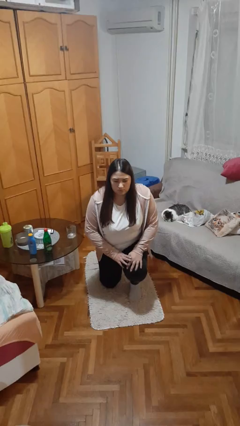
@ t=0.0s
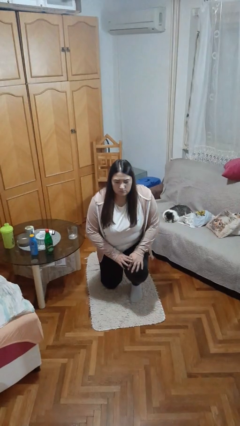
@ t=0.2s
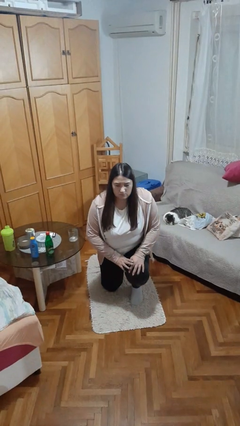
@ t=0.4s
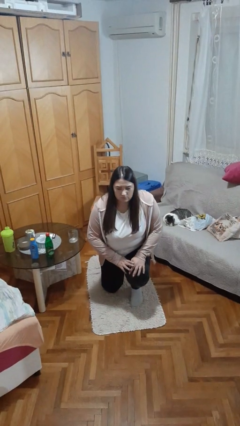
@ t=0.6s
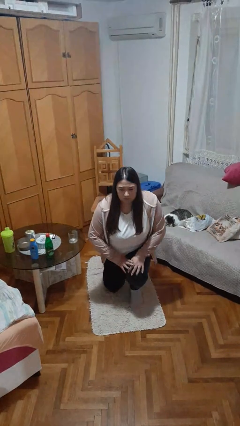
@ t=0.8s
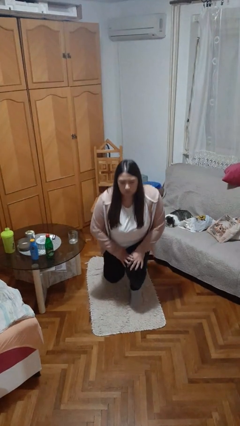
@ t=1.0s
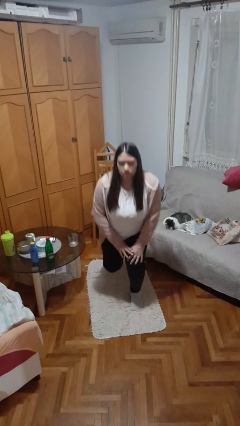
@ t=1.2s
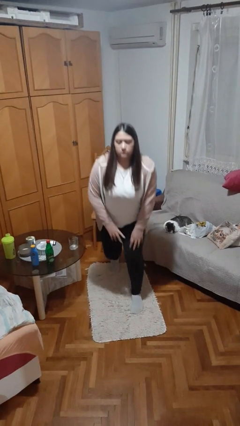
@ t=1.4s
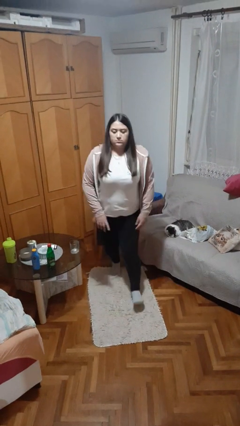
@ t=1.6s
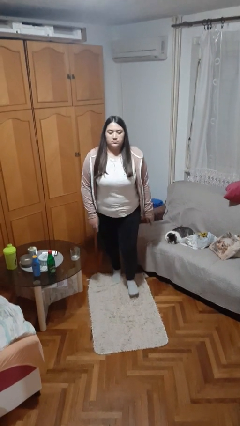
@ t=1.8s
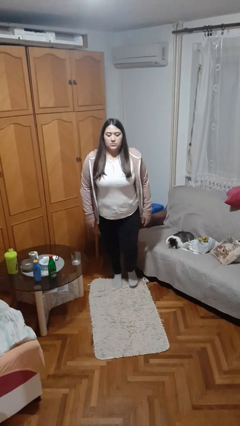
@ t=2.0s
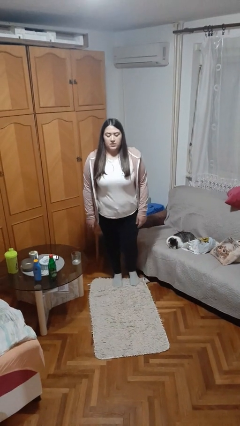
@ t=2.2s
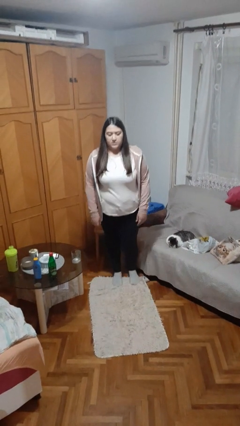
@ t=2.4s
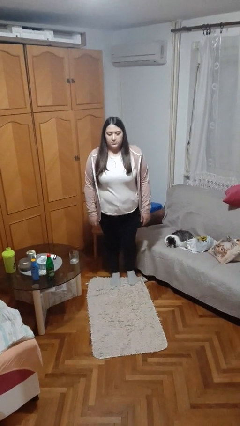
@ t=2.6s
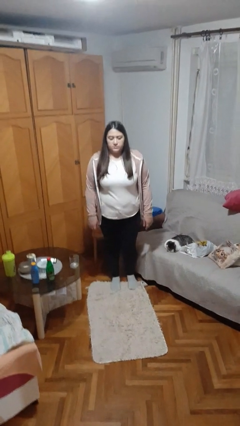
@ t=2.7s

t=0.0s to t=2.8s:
person stands up from floor

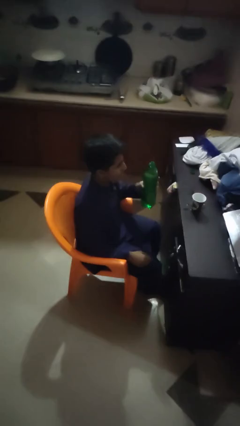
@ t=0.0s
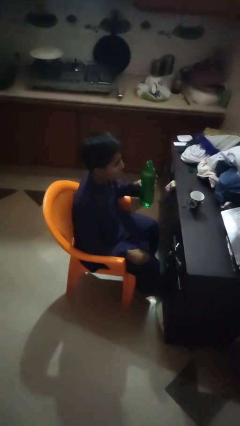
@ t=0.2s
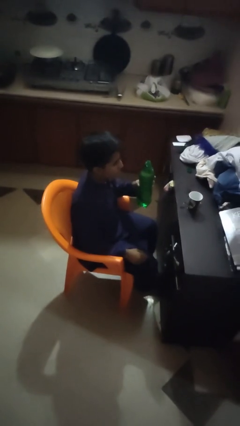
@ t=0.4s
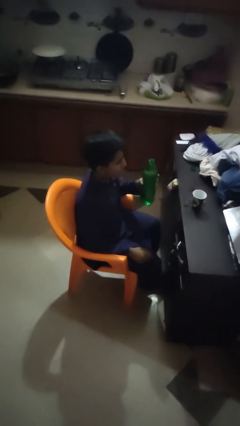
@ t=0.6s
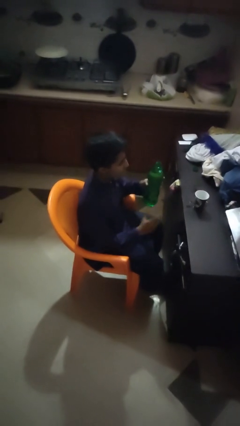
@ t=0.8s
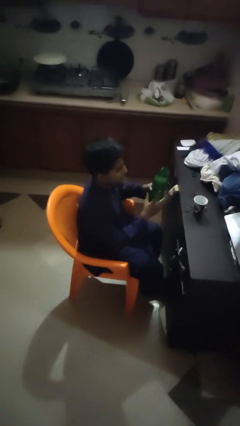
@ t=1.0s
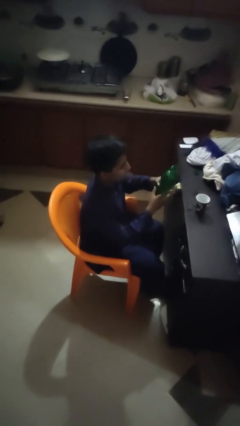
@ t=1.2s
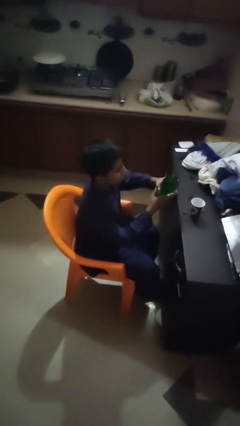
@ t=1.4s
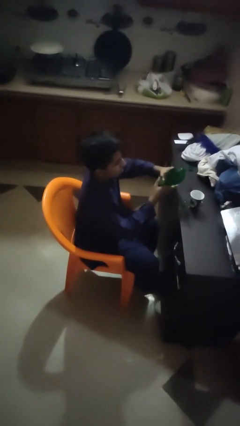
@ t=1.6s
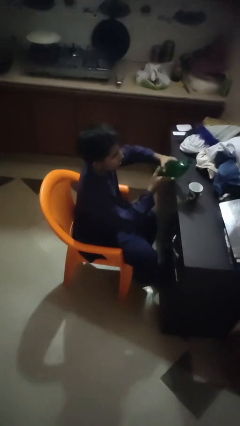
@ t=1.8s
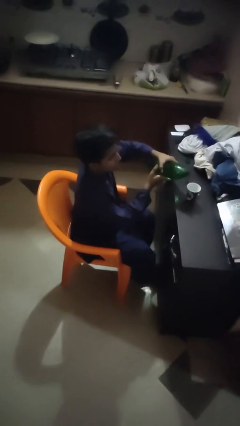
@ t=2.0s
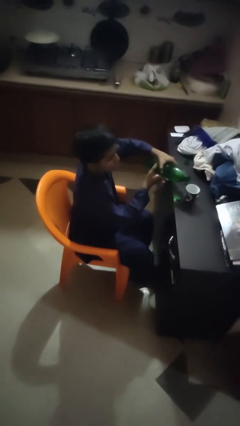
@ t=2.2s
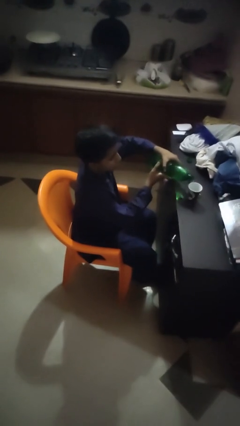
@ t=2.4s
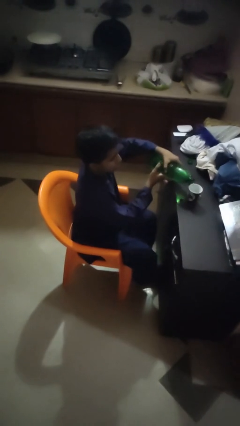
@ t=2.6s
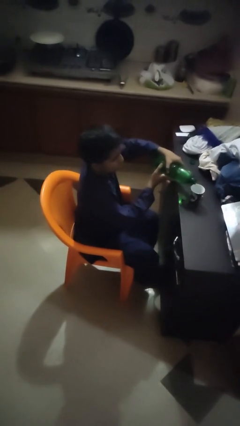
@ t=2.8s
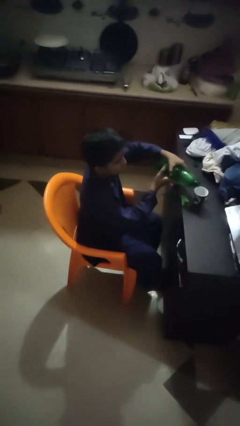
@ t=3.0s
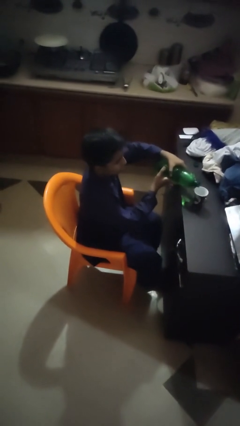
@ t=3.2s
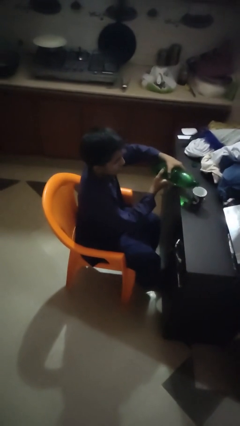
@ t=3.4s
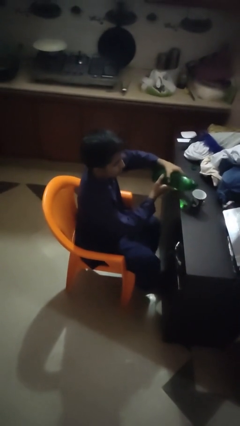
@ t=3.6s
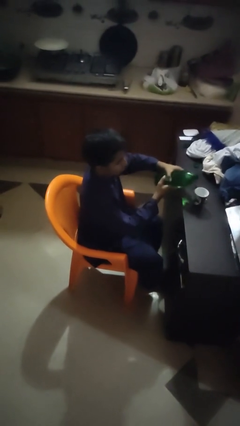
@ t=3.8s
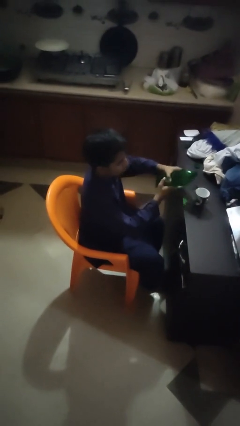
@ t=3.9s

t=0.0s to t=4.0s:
person pours liquid into cup

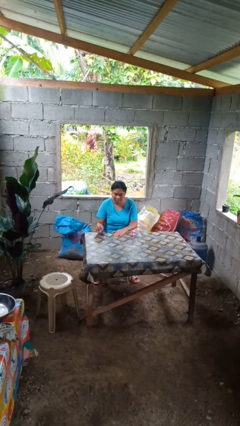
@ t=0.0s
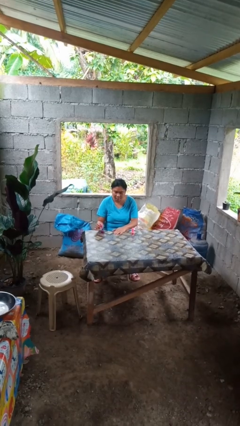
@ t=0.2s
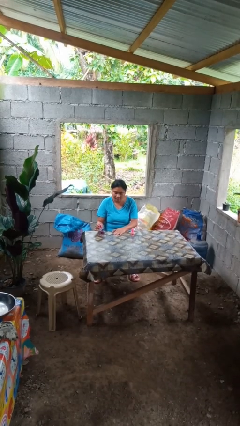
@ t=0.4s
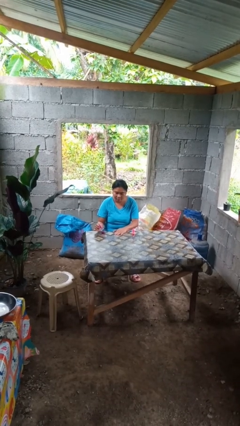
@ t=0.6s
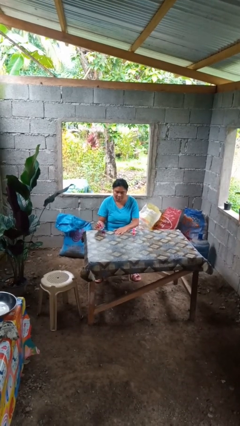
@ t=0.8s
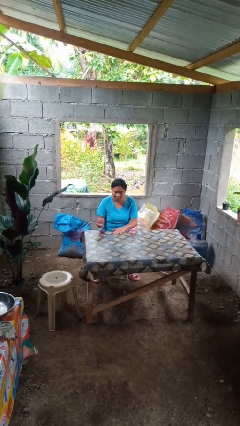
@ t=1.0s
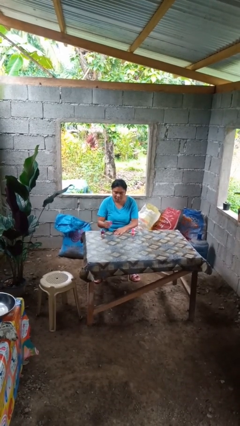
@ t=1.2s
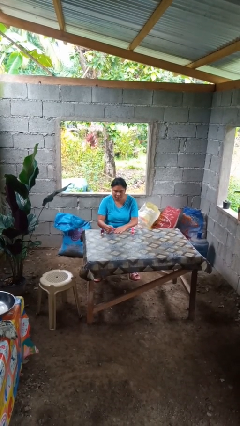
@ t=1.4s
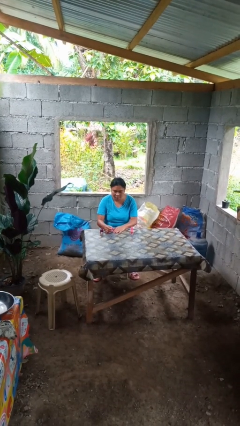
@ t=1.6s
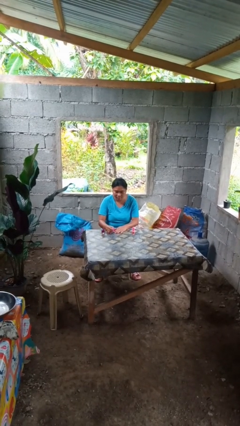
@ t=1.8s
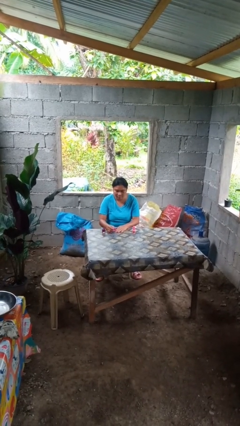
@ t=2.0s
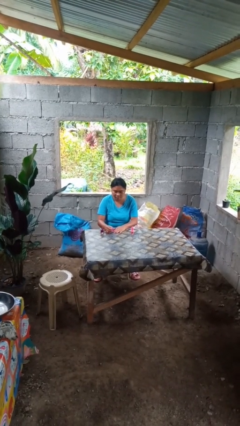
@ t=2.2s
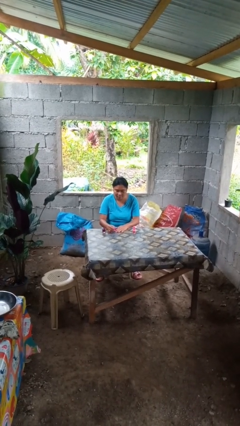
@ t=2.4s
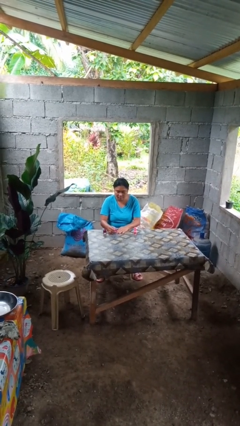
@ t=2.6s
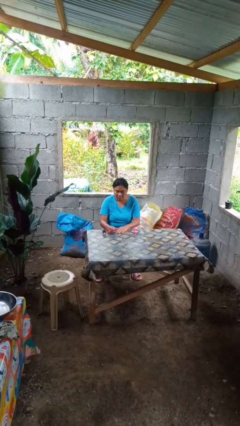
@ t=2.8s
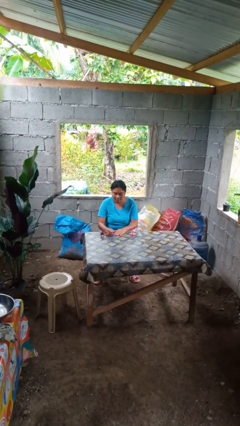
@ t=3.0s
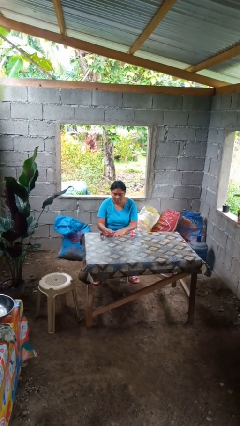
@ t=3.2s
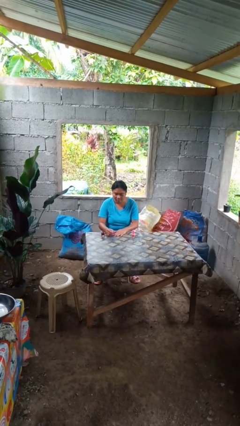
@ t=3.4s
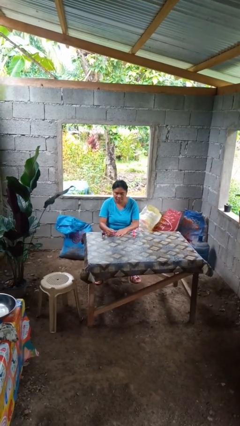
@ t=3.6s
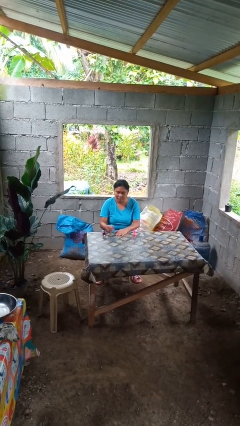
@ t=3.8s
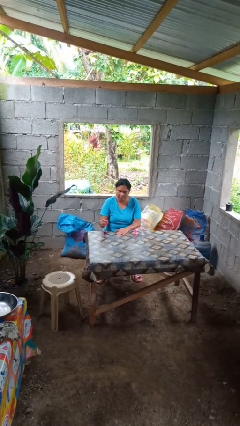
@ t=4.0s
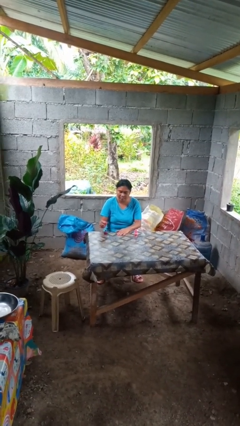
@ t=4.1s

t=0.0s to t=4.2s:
person paints fingernails

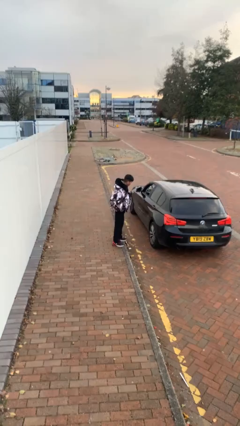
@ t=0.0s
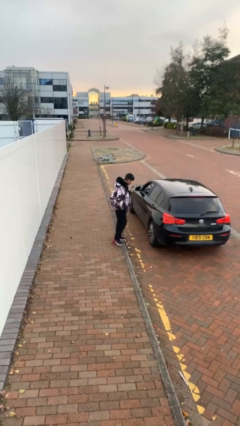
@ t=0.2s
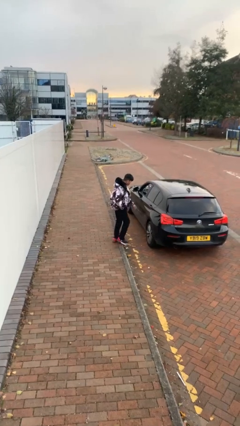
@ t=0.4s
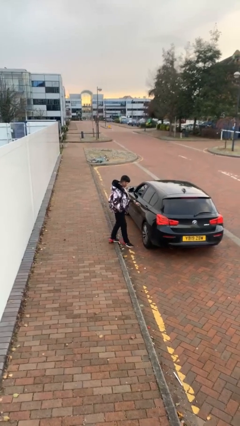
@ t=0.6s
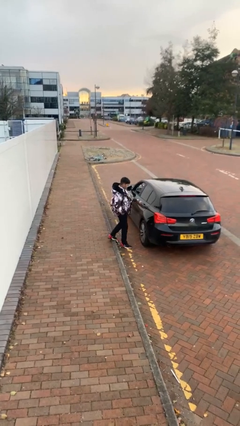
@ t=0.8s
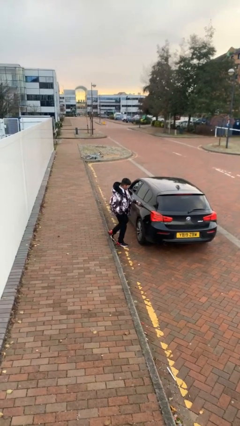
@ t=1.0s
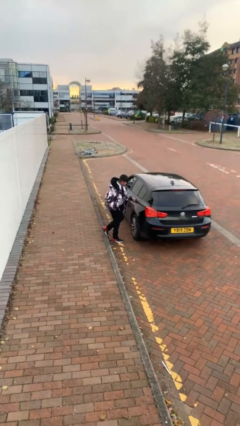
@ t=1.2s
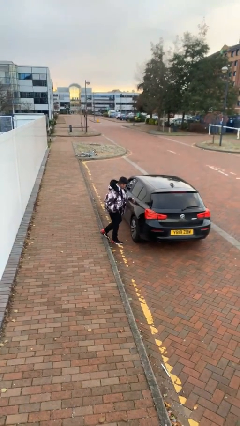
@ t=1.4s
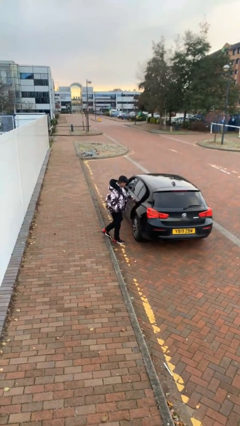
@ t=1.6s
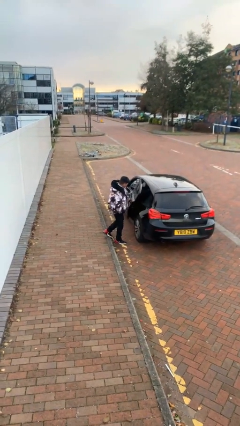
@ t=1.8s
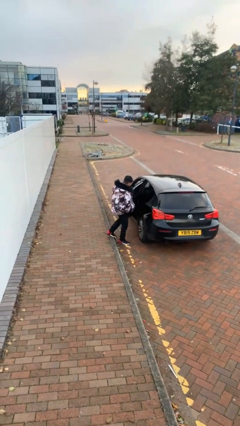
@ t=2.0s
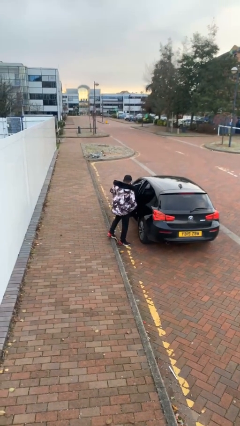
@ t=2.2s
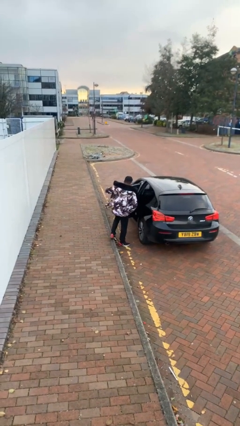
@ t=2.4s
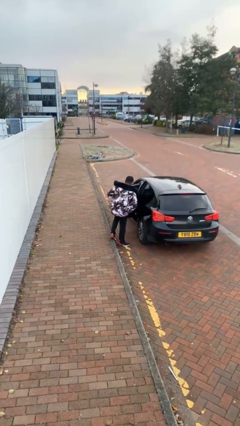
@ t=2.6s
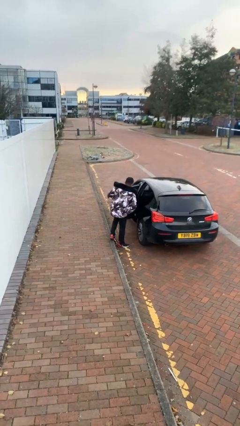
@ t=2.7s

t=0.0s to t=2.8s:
person opens car door

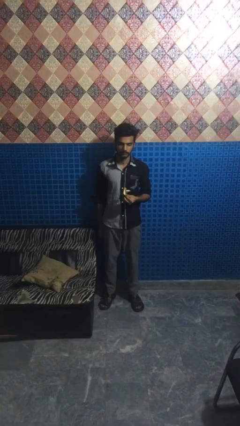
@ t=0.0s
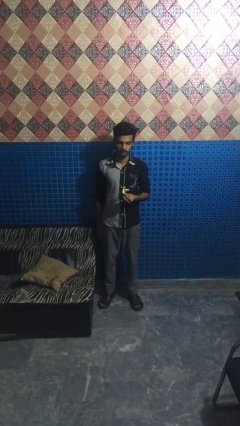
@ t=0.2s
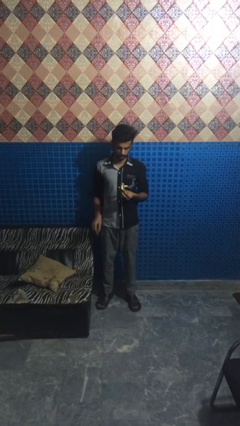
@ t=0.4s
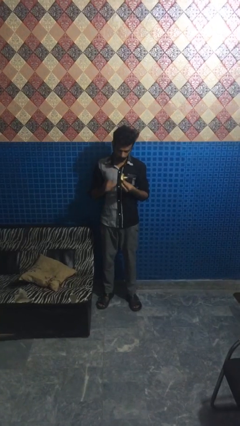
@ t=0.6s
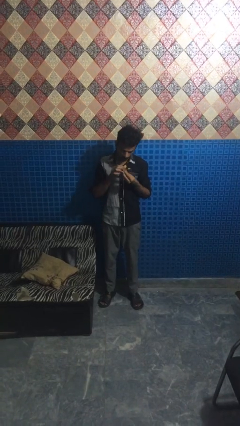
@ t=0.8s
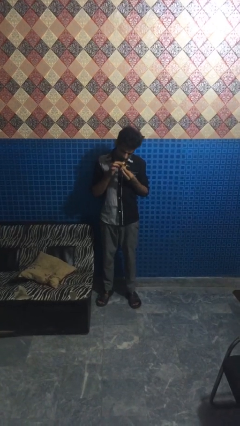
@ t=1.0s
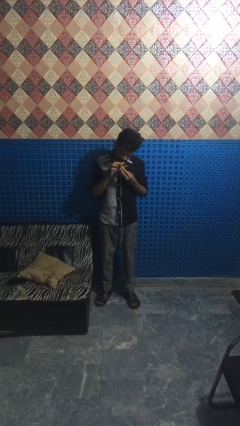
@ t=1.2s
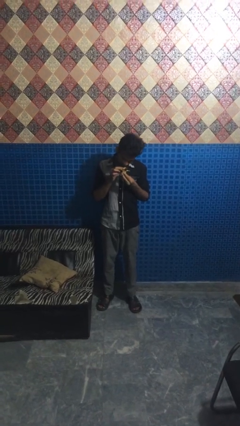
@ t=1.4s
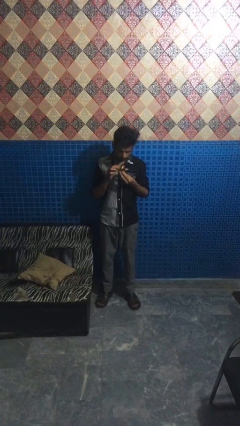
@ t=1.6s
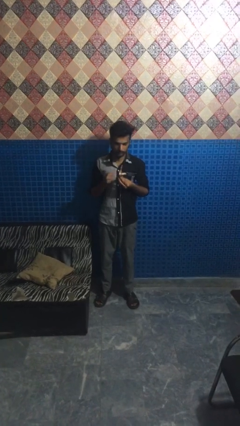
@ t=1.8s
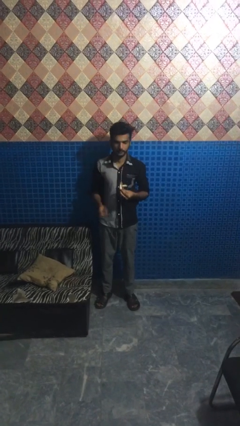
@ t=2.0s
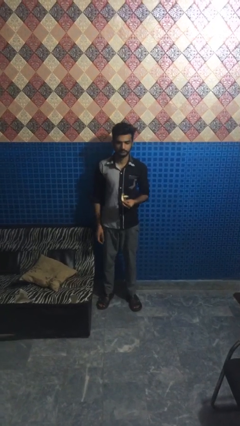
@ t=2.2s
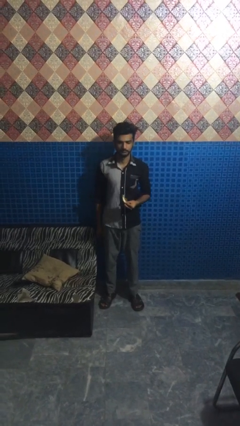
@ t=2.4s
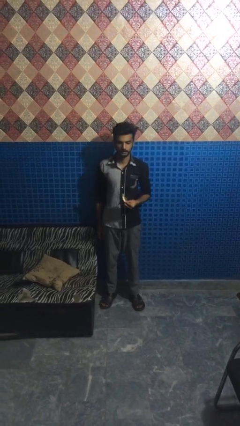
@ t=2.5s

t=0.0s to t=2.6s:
person eats banana

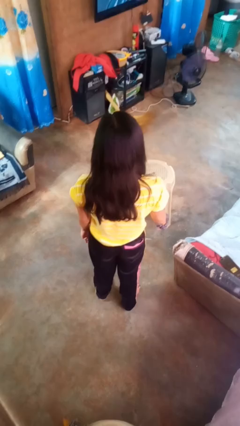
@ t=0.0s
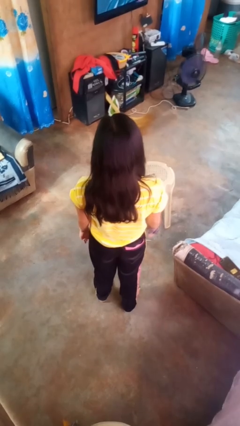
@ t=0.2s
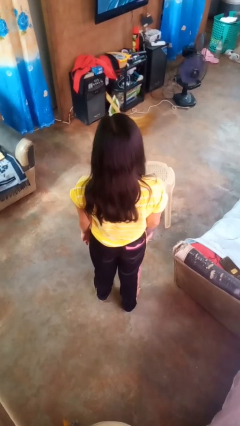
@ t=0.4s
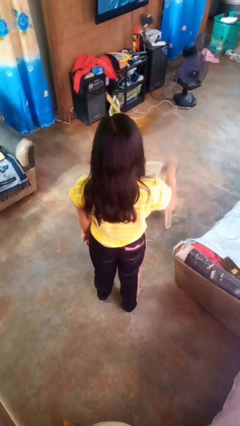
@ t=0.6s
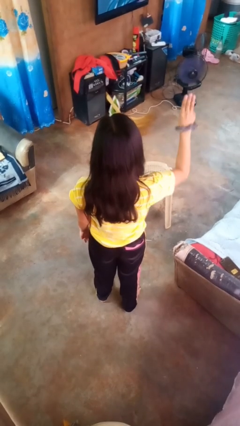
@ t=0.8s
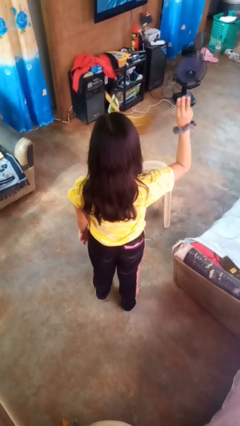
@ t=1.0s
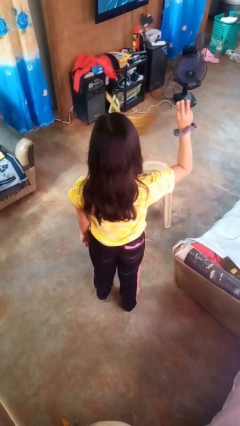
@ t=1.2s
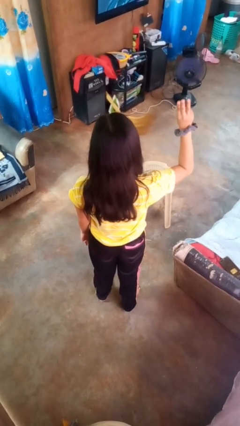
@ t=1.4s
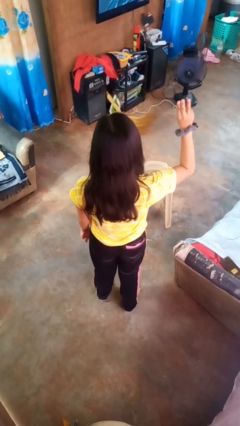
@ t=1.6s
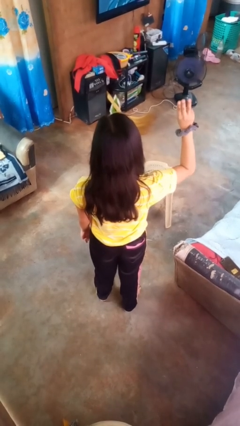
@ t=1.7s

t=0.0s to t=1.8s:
person gestures number three
